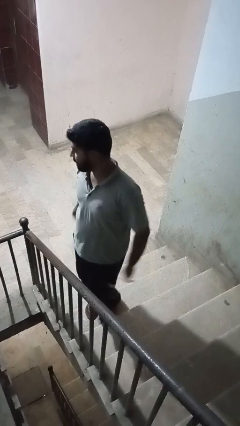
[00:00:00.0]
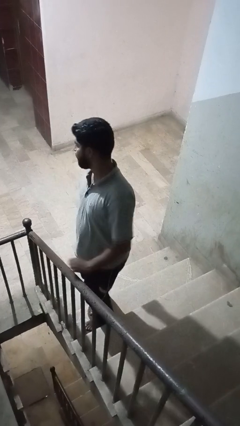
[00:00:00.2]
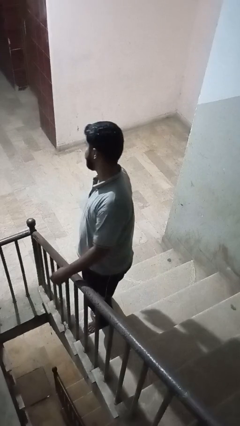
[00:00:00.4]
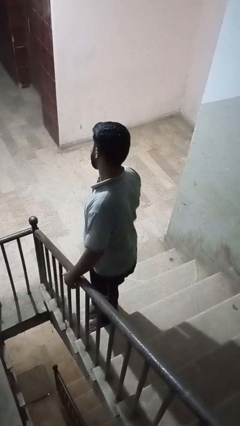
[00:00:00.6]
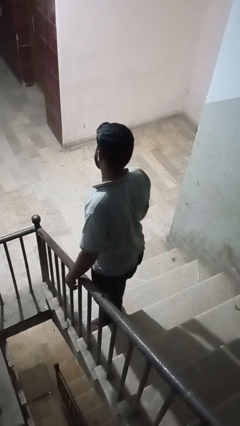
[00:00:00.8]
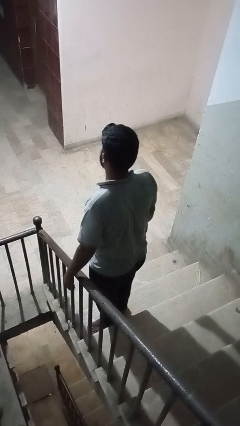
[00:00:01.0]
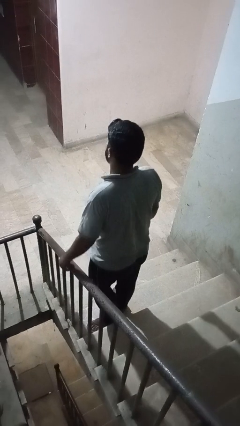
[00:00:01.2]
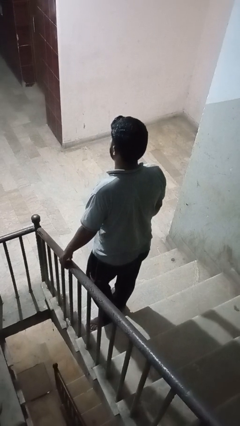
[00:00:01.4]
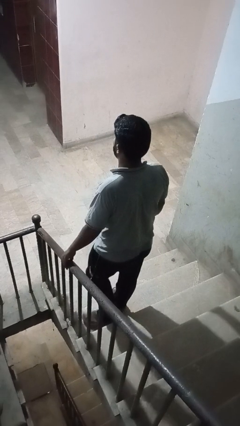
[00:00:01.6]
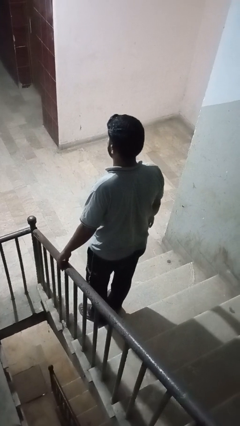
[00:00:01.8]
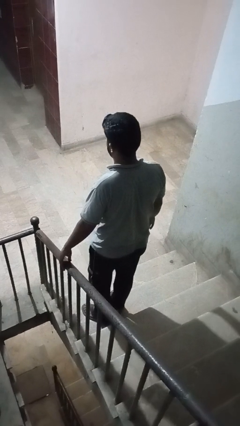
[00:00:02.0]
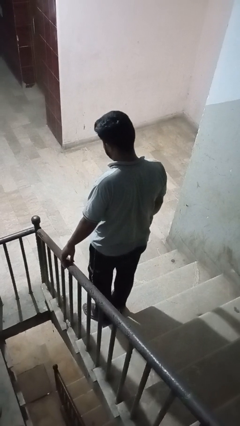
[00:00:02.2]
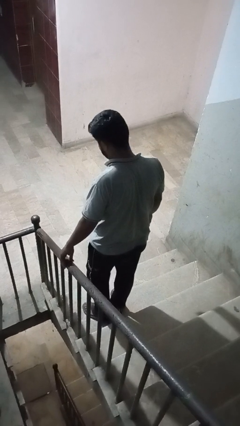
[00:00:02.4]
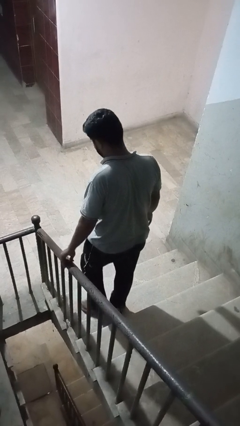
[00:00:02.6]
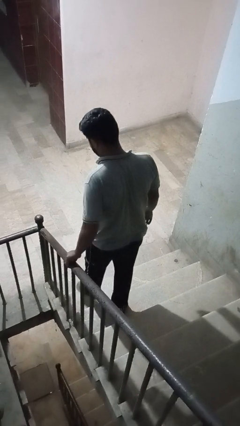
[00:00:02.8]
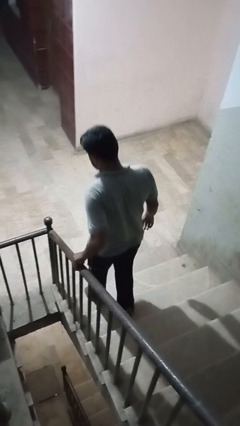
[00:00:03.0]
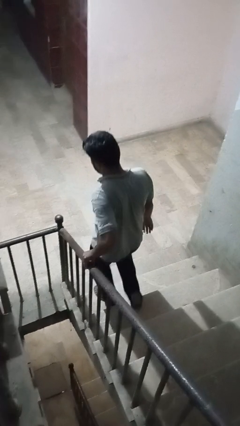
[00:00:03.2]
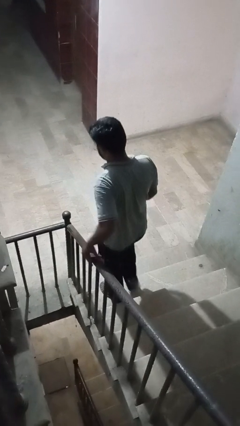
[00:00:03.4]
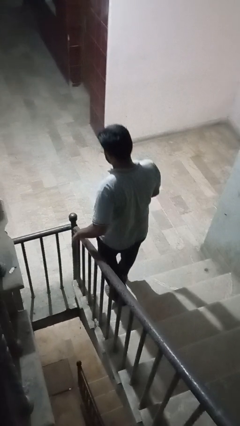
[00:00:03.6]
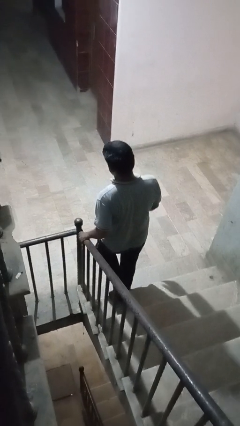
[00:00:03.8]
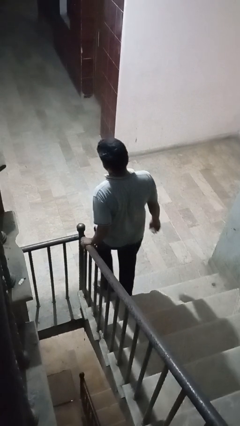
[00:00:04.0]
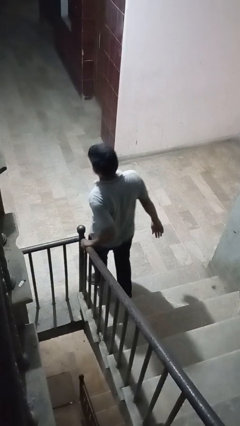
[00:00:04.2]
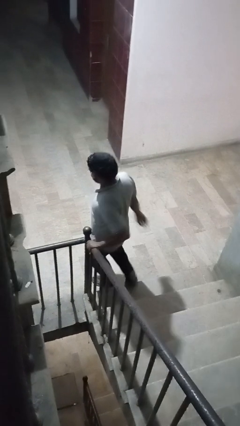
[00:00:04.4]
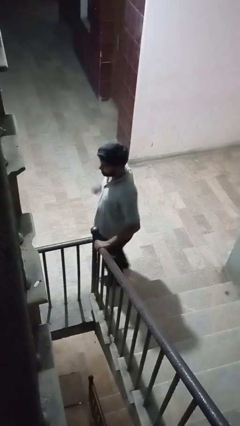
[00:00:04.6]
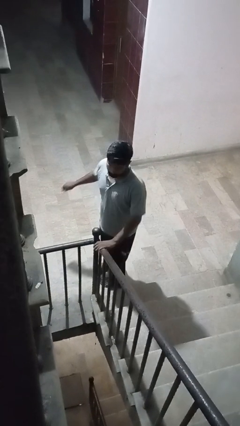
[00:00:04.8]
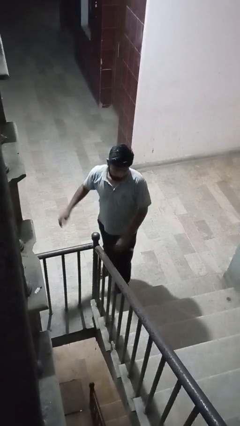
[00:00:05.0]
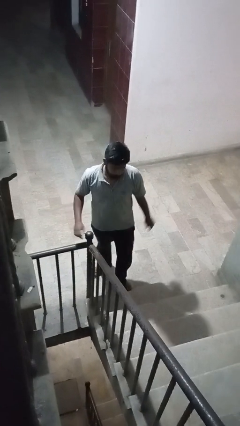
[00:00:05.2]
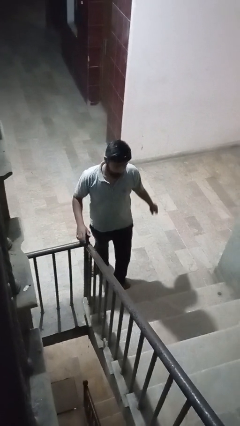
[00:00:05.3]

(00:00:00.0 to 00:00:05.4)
person climbs down stairs

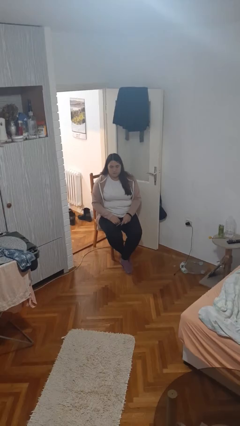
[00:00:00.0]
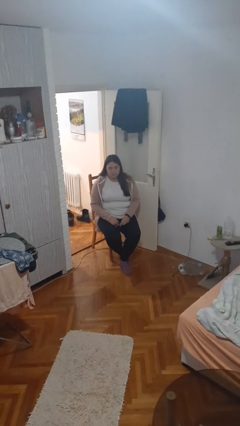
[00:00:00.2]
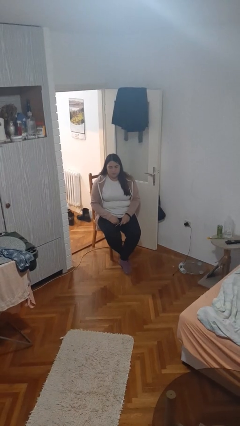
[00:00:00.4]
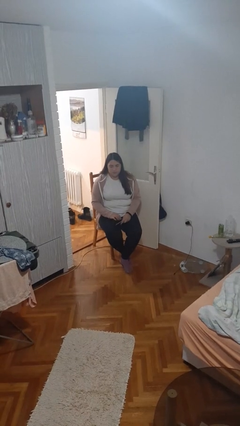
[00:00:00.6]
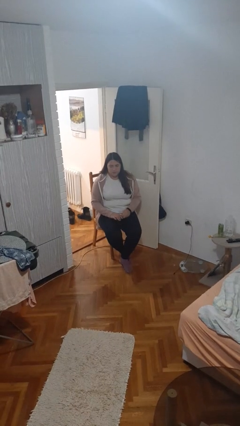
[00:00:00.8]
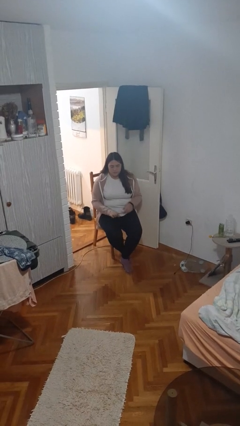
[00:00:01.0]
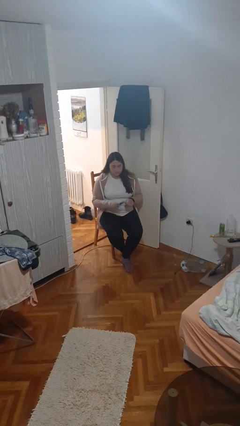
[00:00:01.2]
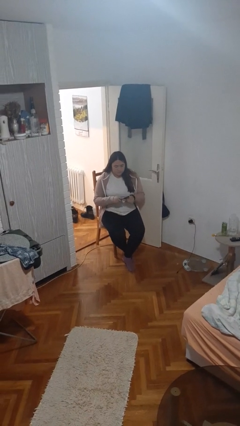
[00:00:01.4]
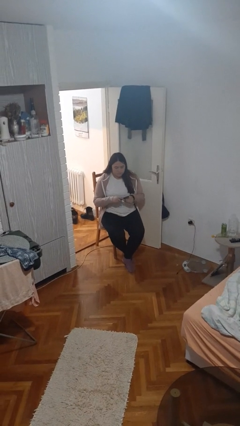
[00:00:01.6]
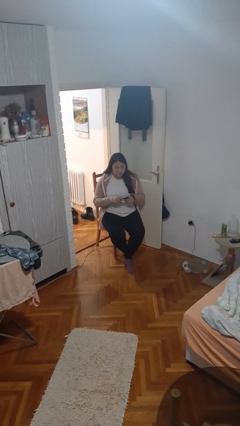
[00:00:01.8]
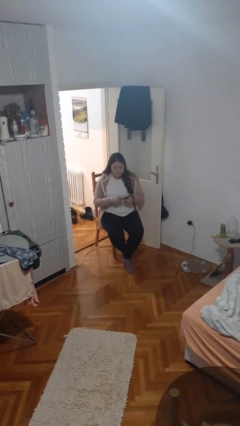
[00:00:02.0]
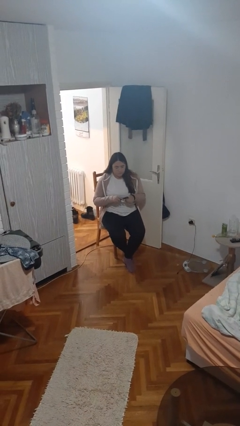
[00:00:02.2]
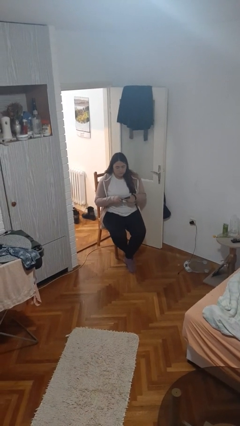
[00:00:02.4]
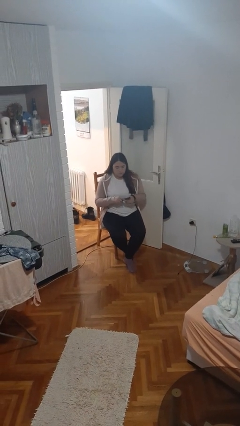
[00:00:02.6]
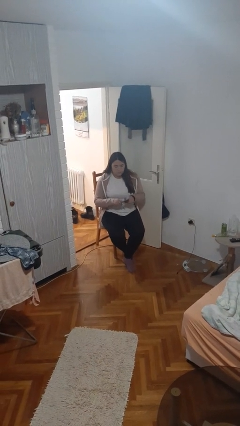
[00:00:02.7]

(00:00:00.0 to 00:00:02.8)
person files fingernails

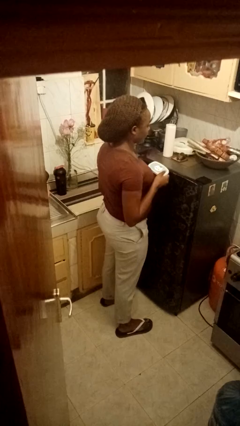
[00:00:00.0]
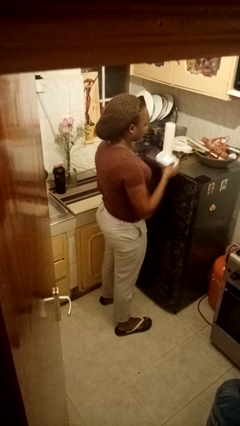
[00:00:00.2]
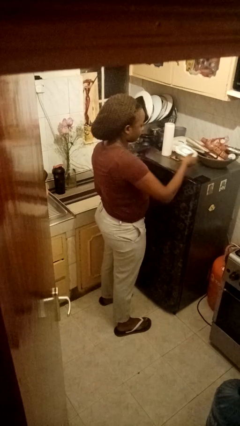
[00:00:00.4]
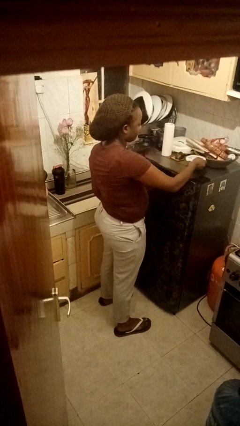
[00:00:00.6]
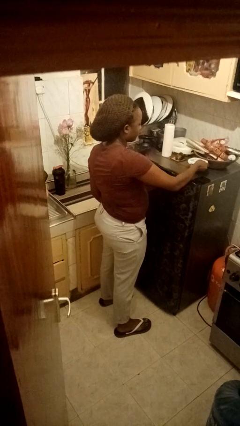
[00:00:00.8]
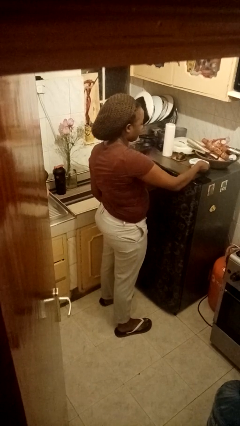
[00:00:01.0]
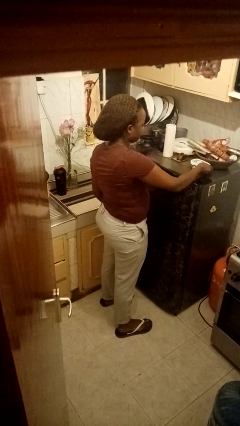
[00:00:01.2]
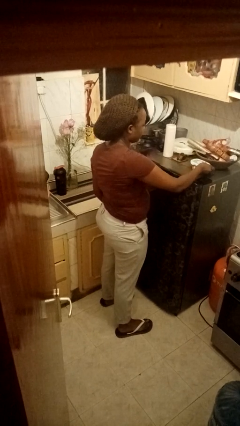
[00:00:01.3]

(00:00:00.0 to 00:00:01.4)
person puts down object on countertop

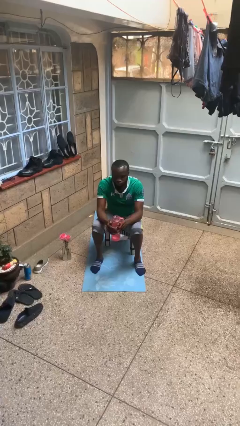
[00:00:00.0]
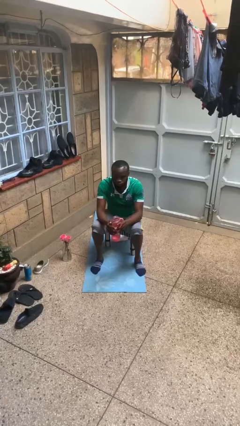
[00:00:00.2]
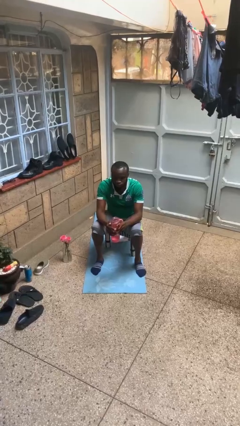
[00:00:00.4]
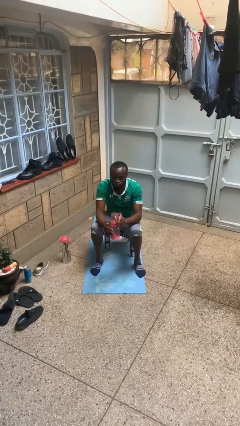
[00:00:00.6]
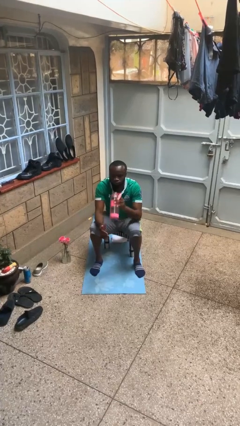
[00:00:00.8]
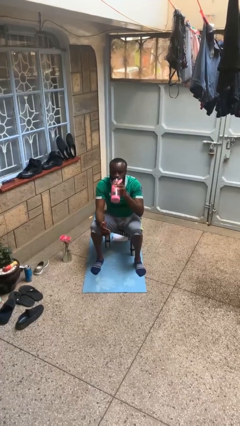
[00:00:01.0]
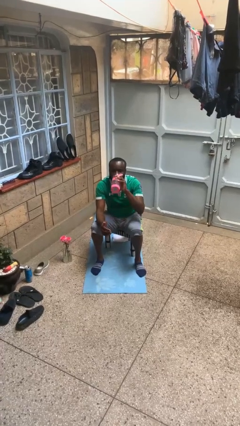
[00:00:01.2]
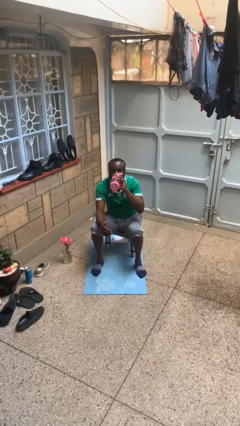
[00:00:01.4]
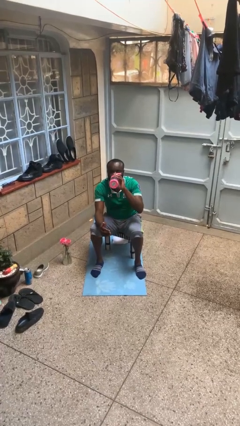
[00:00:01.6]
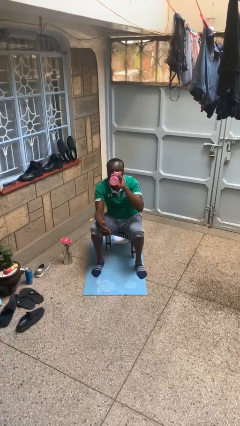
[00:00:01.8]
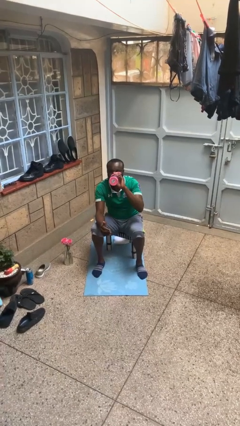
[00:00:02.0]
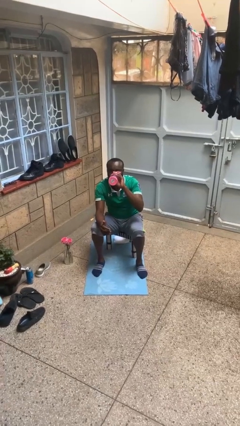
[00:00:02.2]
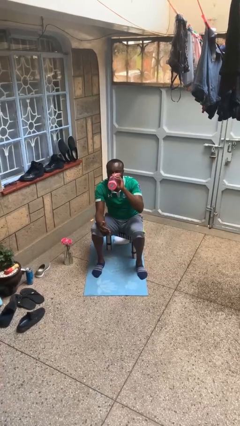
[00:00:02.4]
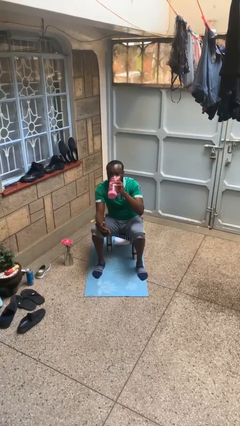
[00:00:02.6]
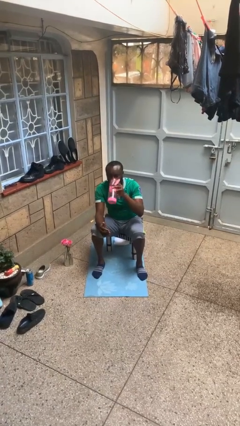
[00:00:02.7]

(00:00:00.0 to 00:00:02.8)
person drinks from bottle

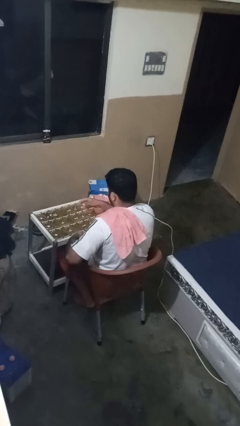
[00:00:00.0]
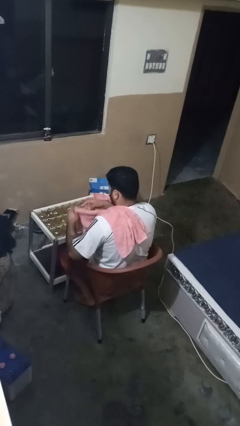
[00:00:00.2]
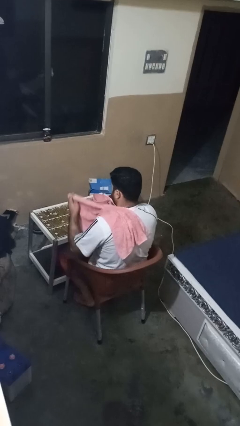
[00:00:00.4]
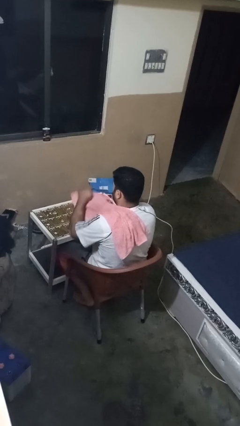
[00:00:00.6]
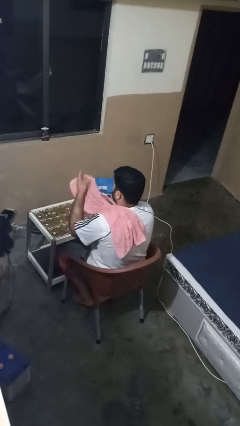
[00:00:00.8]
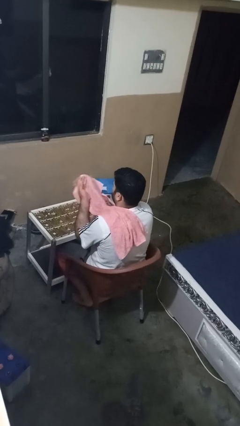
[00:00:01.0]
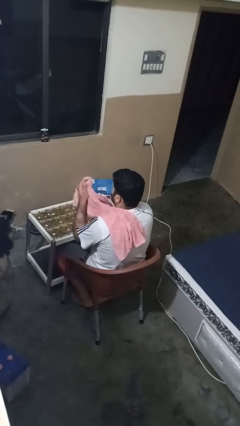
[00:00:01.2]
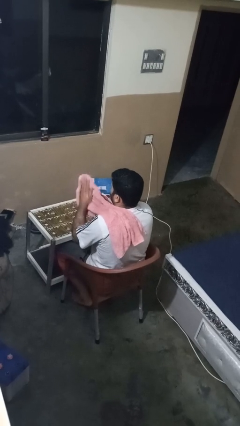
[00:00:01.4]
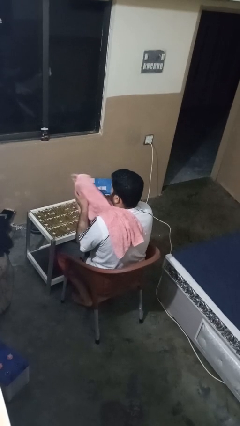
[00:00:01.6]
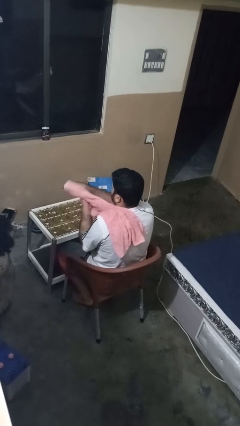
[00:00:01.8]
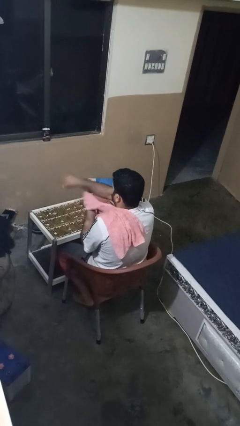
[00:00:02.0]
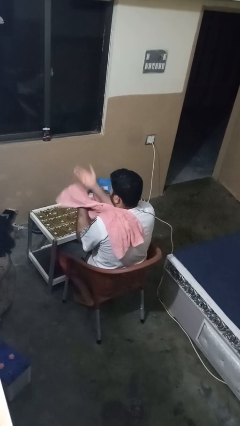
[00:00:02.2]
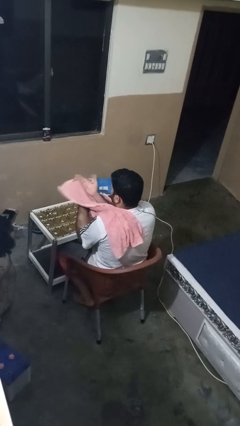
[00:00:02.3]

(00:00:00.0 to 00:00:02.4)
person dries hands with towel

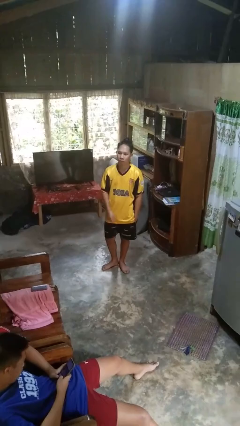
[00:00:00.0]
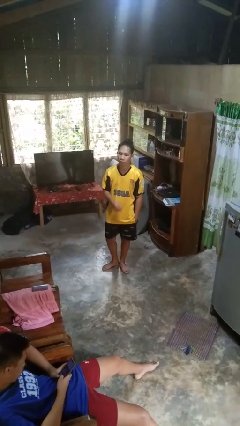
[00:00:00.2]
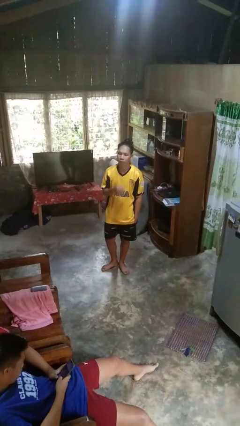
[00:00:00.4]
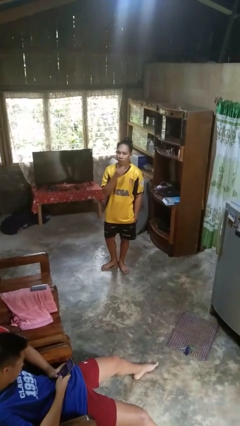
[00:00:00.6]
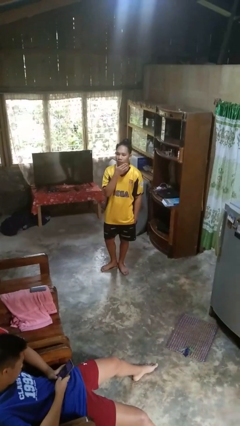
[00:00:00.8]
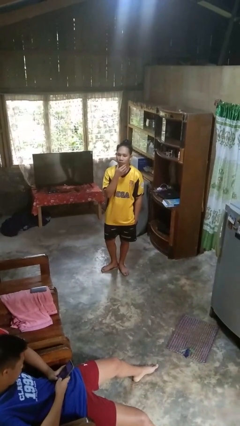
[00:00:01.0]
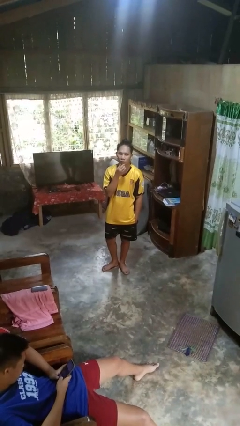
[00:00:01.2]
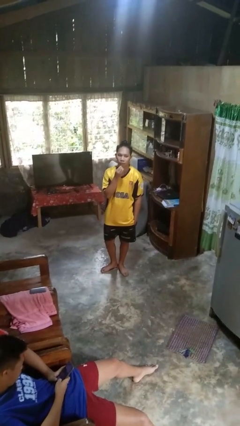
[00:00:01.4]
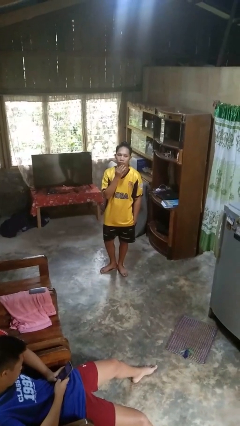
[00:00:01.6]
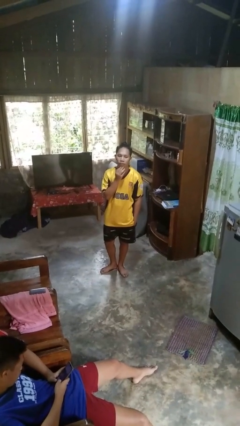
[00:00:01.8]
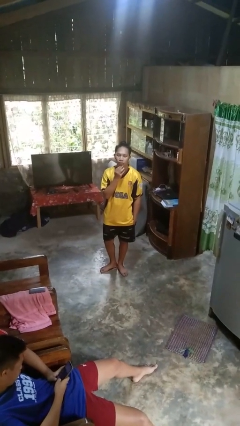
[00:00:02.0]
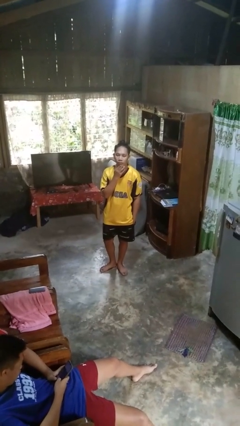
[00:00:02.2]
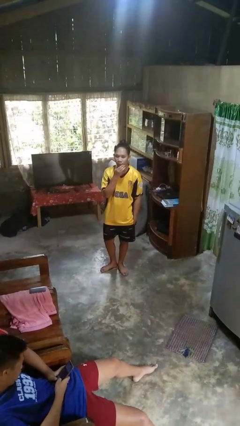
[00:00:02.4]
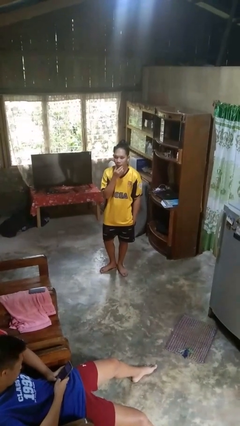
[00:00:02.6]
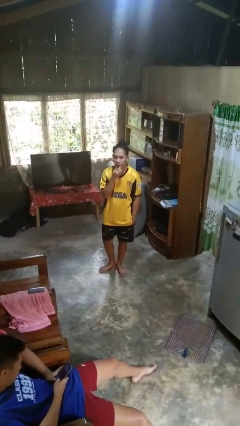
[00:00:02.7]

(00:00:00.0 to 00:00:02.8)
person strokes chin
